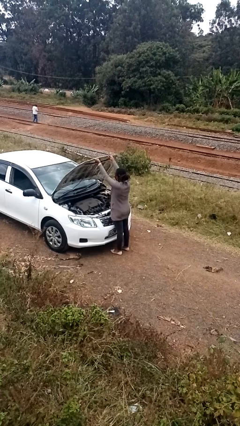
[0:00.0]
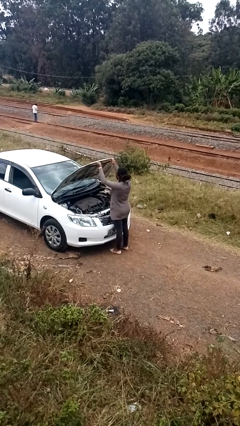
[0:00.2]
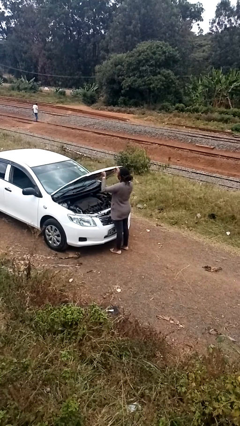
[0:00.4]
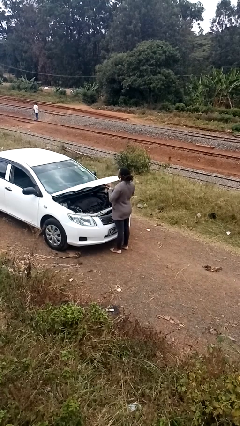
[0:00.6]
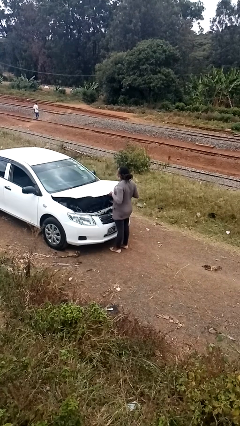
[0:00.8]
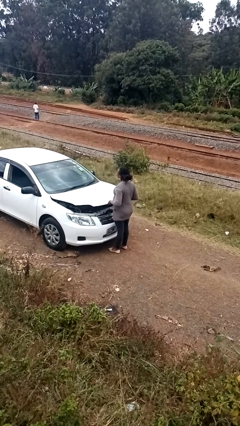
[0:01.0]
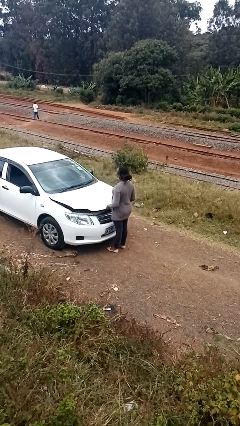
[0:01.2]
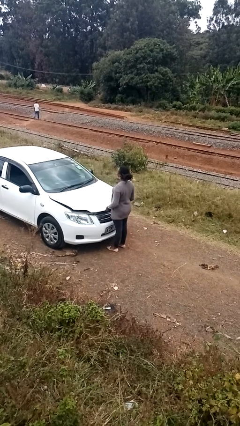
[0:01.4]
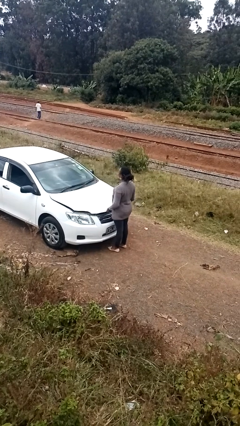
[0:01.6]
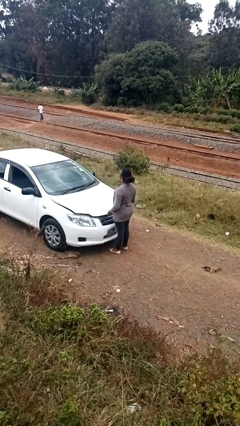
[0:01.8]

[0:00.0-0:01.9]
person closes car hood

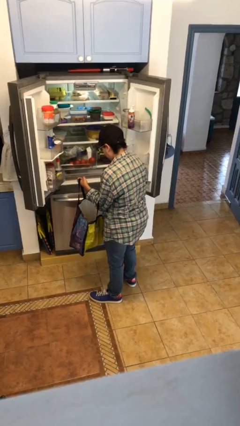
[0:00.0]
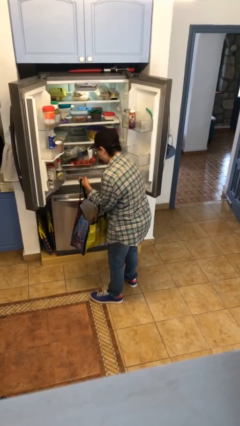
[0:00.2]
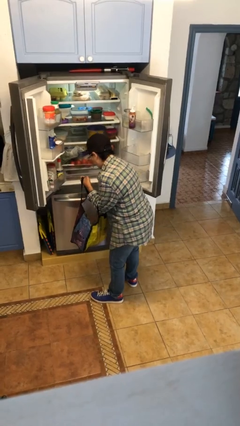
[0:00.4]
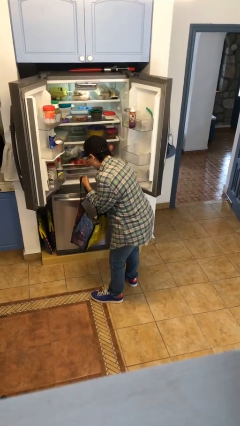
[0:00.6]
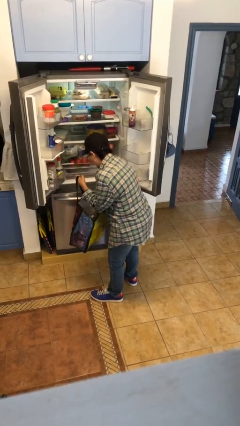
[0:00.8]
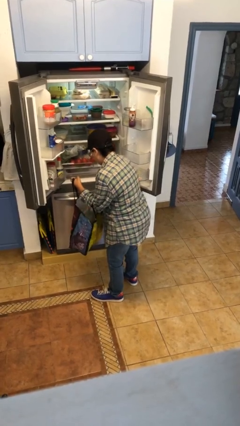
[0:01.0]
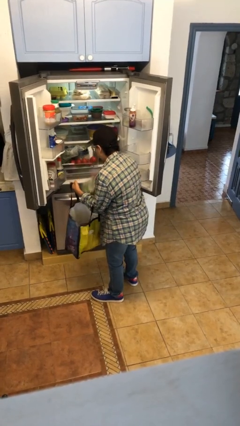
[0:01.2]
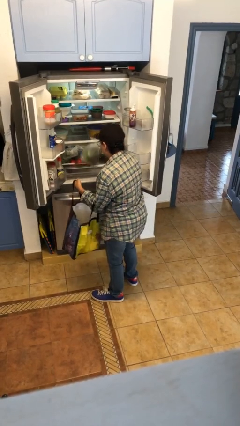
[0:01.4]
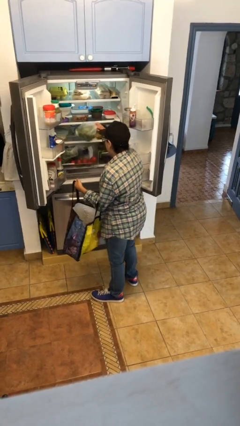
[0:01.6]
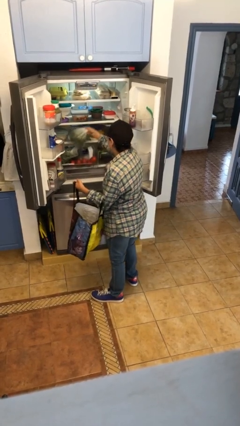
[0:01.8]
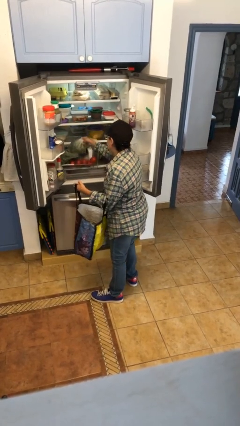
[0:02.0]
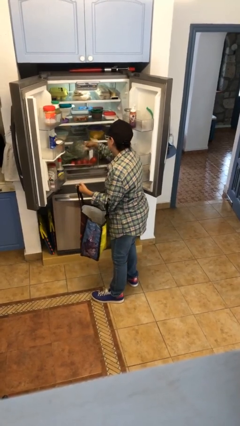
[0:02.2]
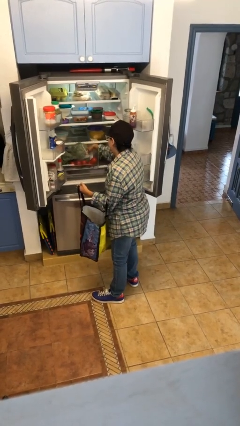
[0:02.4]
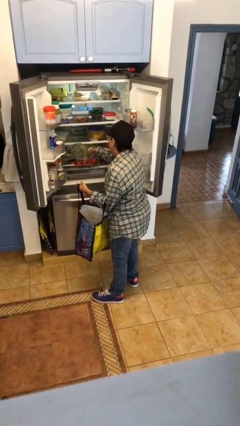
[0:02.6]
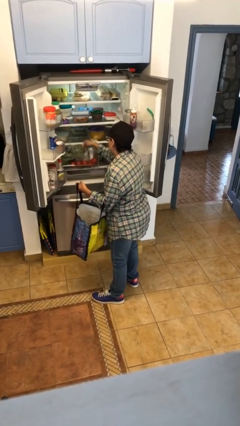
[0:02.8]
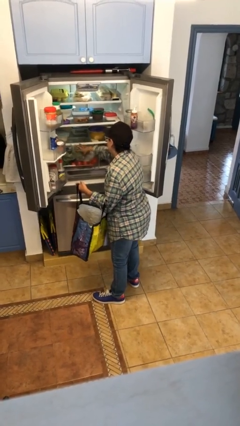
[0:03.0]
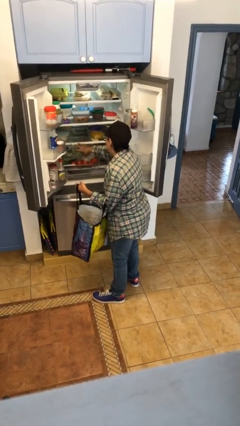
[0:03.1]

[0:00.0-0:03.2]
person loads groceries into refrigerator

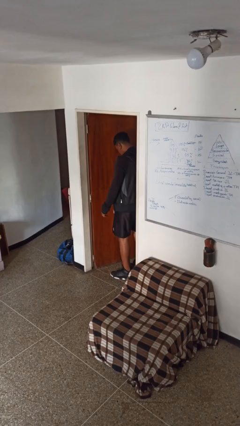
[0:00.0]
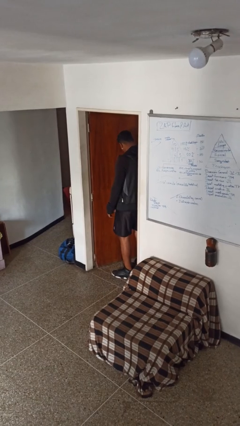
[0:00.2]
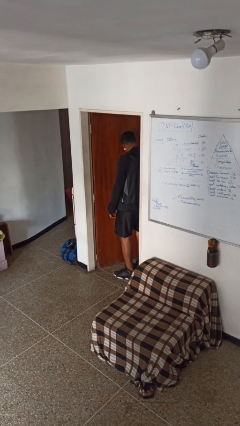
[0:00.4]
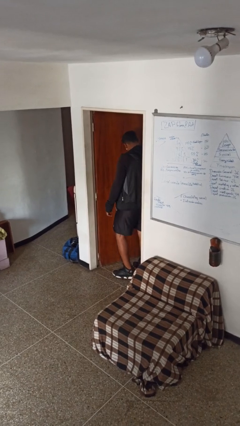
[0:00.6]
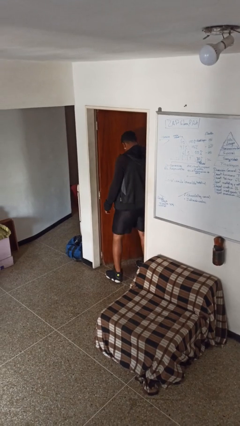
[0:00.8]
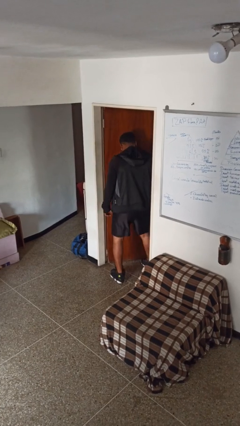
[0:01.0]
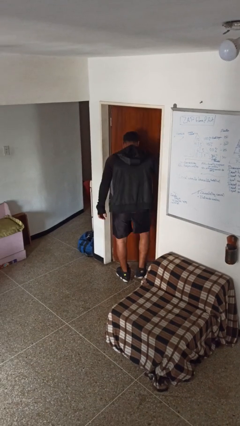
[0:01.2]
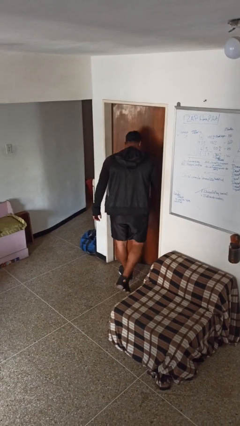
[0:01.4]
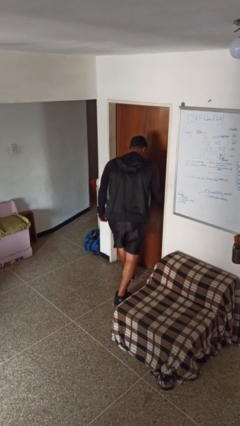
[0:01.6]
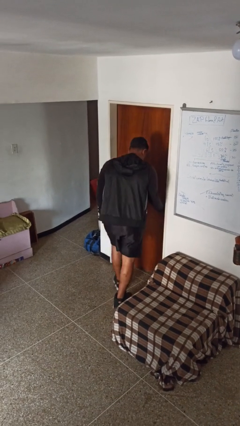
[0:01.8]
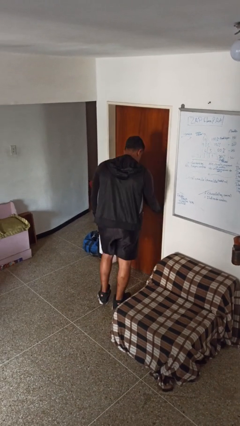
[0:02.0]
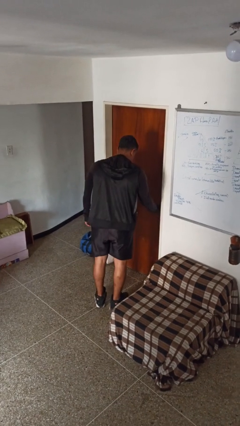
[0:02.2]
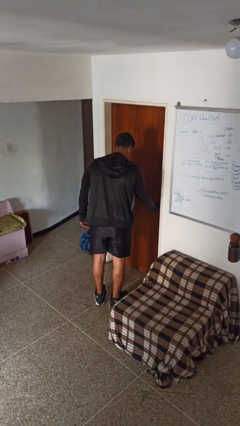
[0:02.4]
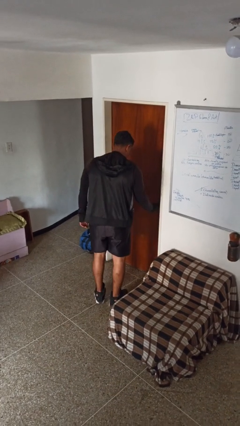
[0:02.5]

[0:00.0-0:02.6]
person closes facility door

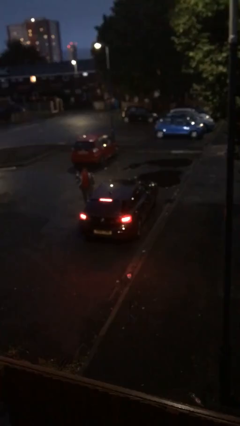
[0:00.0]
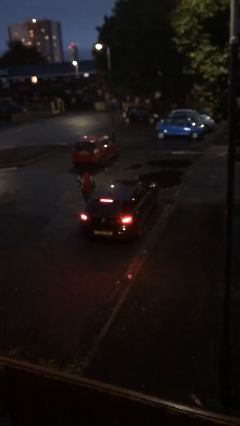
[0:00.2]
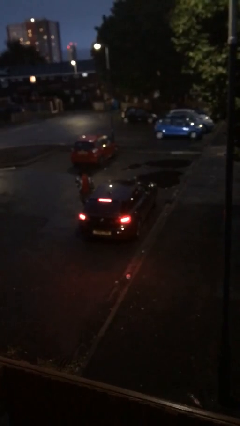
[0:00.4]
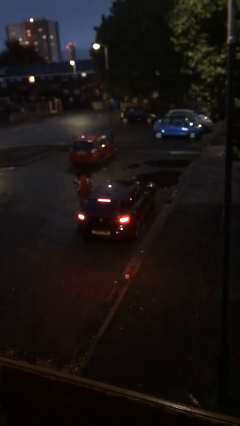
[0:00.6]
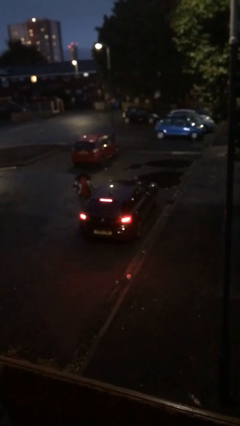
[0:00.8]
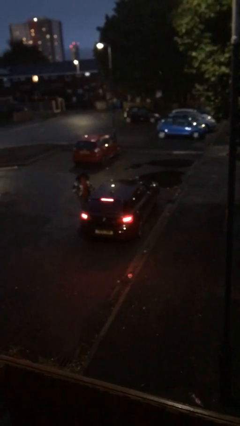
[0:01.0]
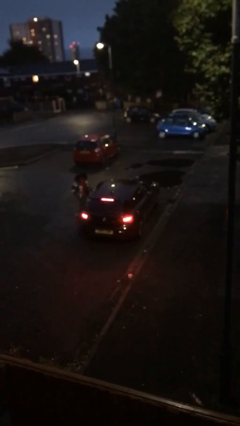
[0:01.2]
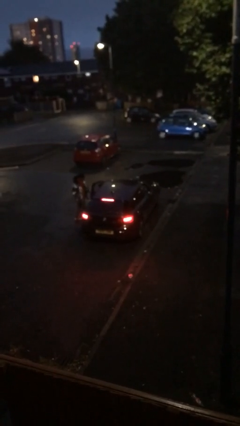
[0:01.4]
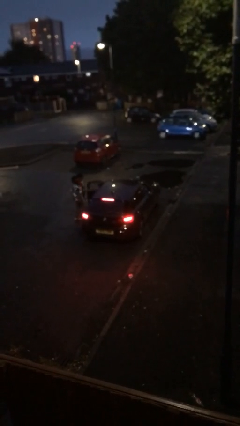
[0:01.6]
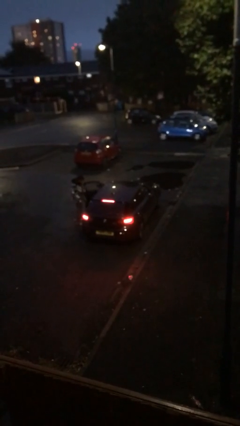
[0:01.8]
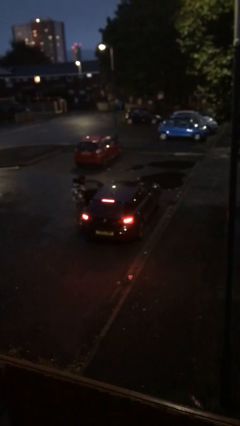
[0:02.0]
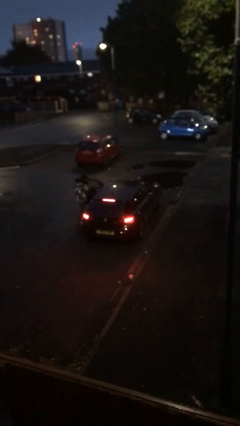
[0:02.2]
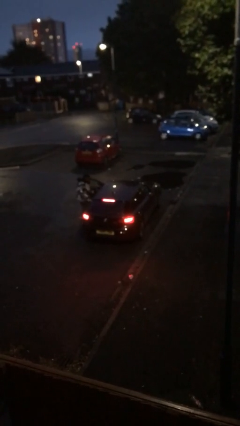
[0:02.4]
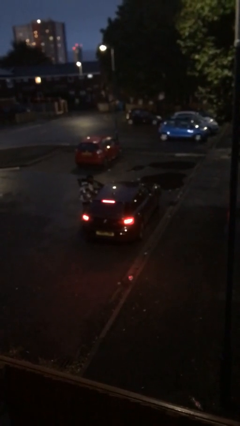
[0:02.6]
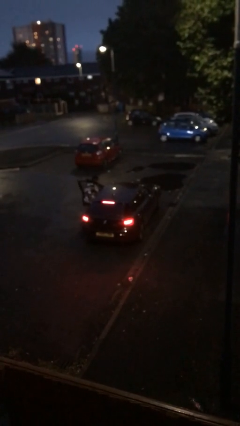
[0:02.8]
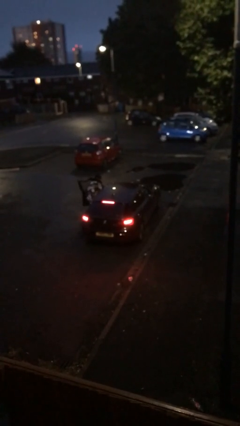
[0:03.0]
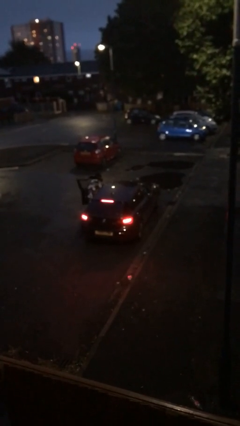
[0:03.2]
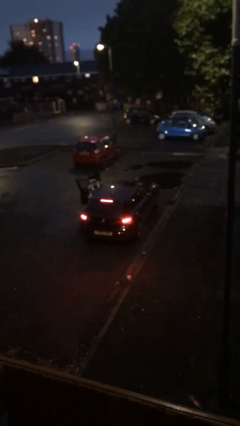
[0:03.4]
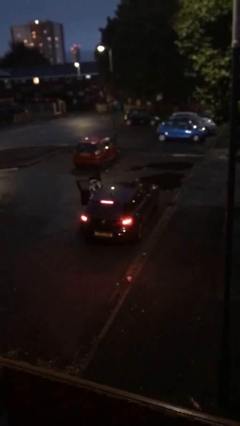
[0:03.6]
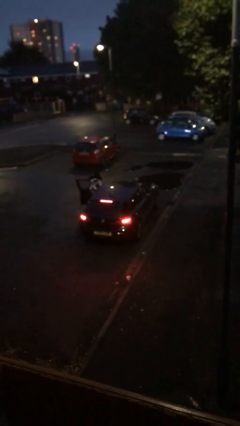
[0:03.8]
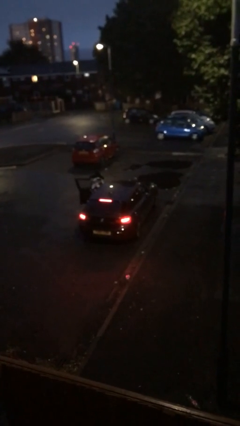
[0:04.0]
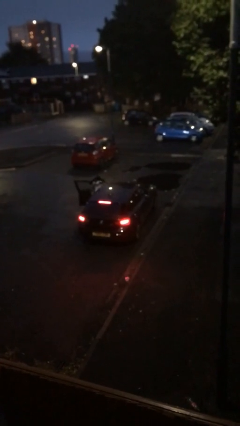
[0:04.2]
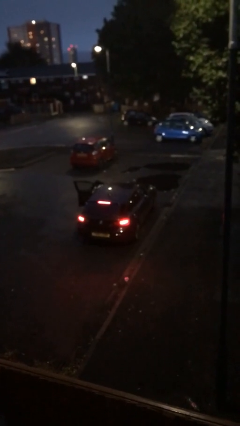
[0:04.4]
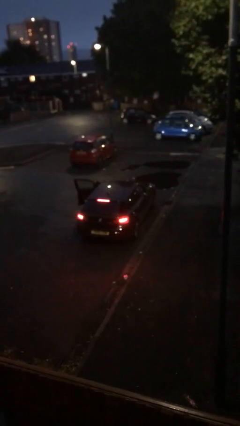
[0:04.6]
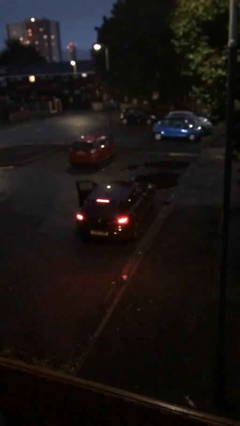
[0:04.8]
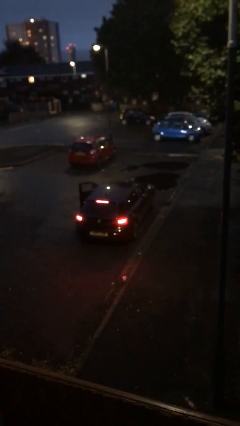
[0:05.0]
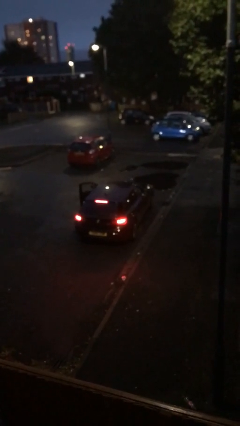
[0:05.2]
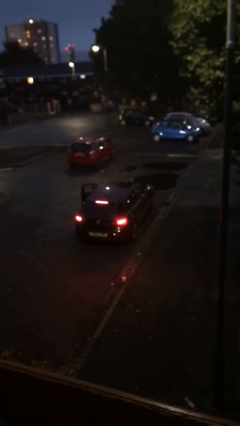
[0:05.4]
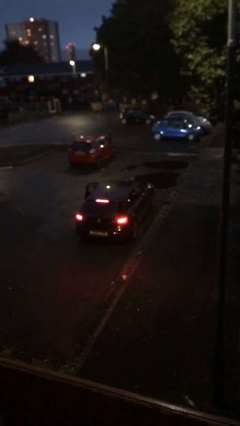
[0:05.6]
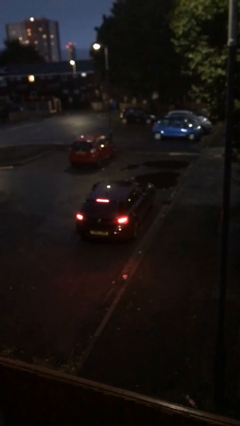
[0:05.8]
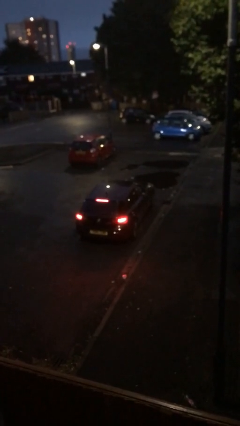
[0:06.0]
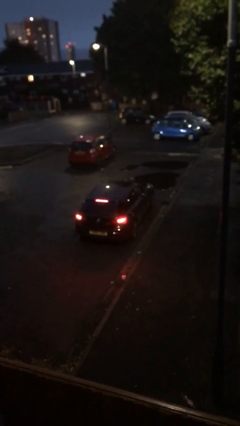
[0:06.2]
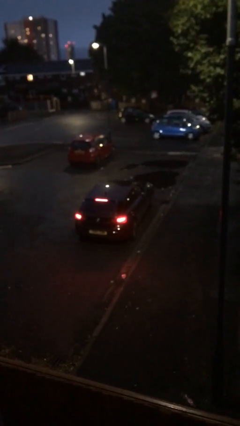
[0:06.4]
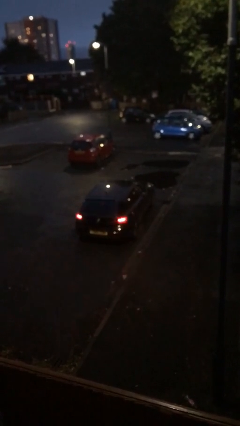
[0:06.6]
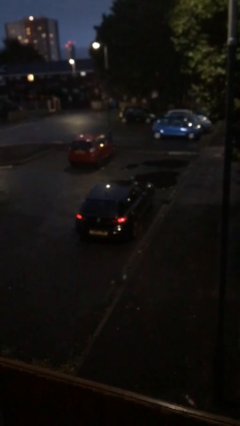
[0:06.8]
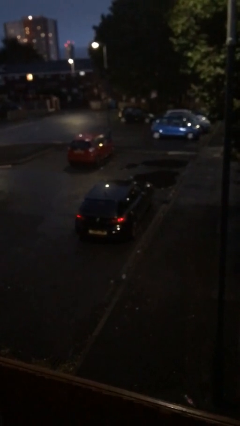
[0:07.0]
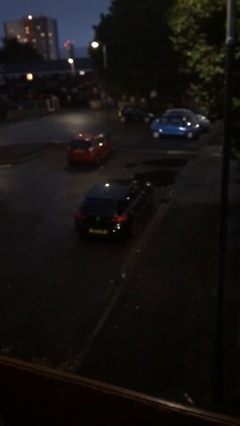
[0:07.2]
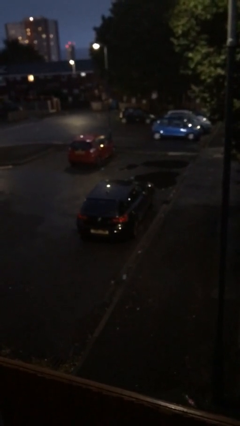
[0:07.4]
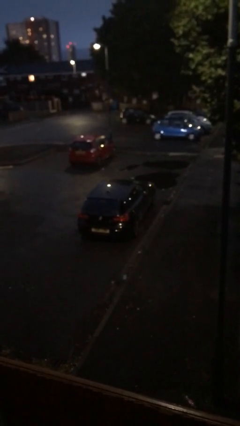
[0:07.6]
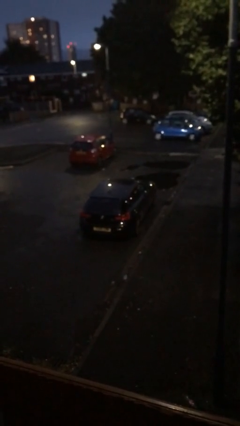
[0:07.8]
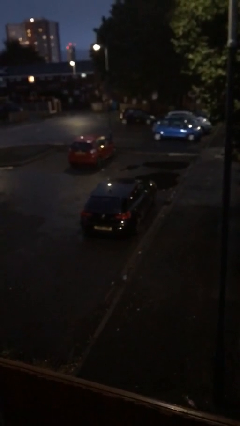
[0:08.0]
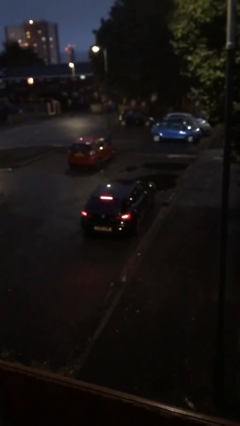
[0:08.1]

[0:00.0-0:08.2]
car picks up person

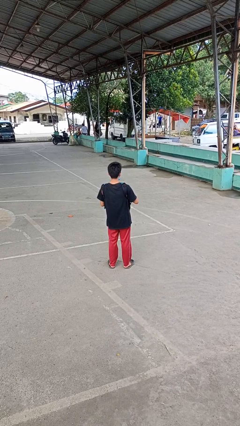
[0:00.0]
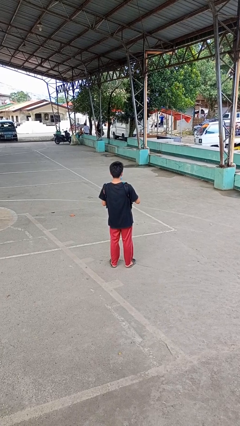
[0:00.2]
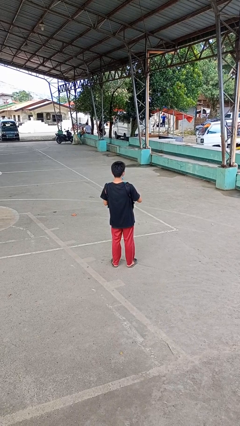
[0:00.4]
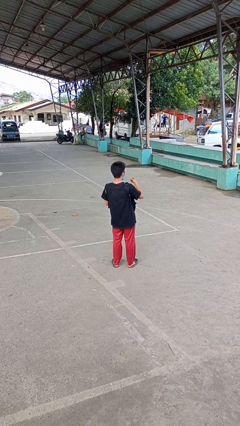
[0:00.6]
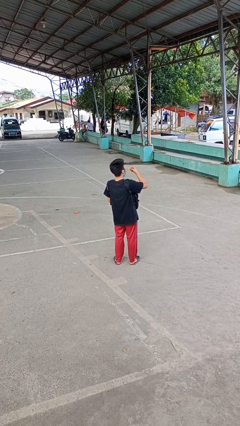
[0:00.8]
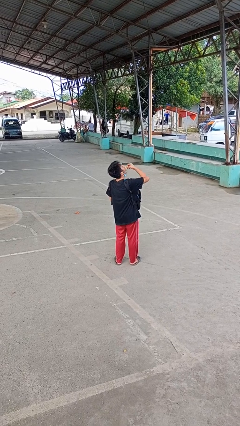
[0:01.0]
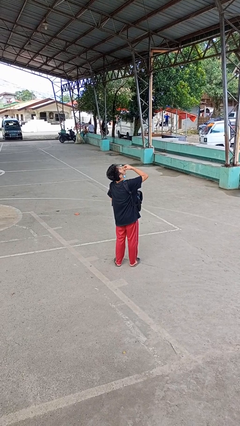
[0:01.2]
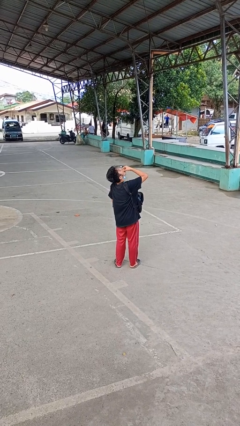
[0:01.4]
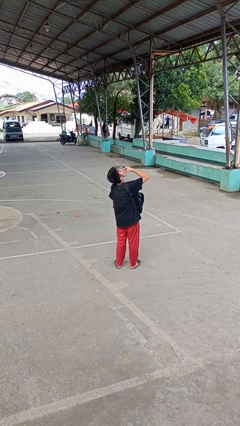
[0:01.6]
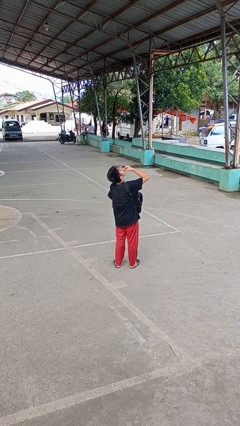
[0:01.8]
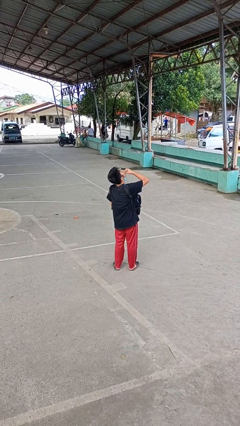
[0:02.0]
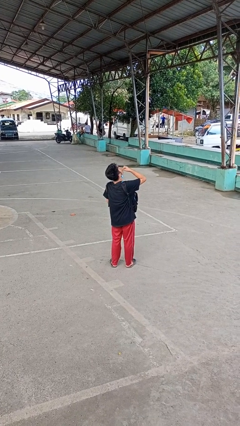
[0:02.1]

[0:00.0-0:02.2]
person eats snack from bag
